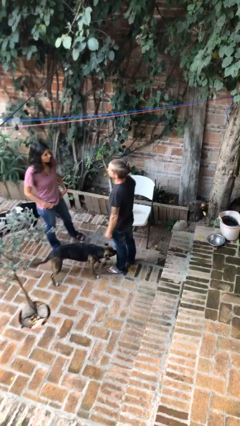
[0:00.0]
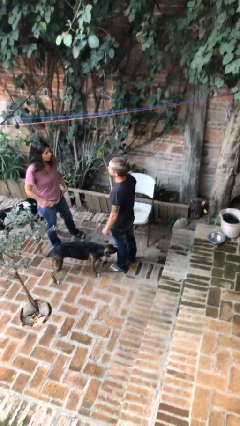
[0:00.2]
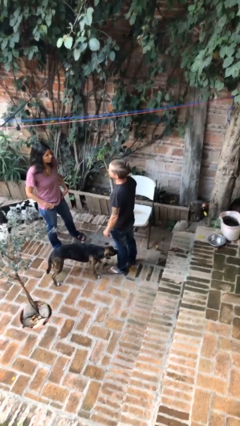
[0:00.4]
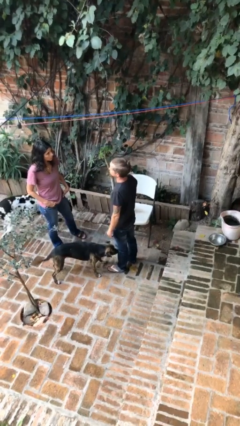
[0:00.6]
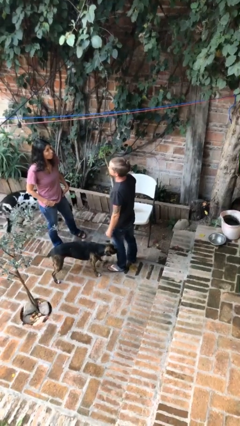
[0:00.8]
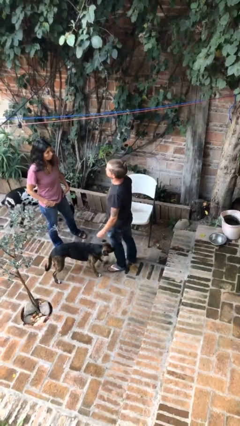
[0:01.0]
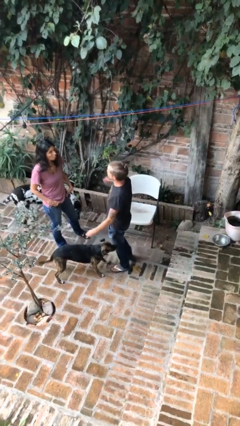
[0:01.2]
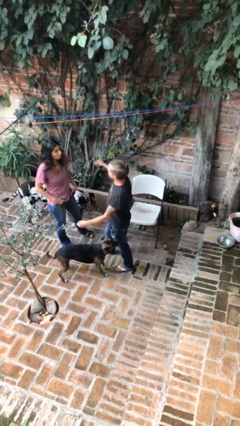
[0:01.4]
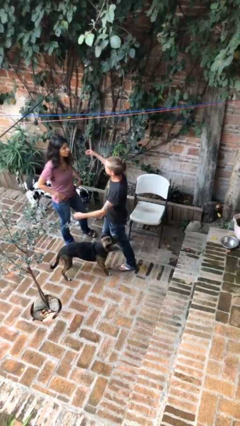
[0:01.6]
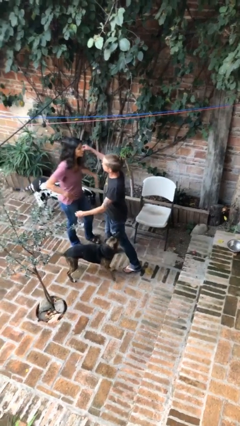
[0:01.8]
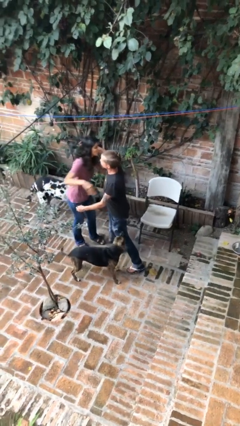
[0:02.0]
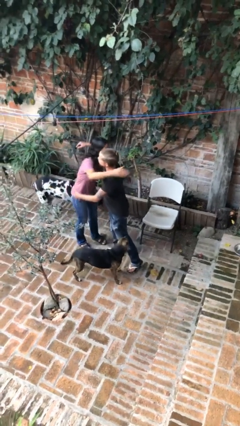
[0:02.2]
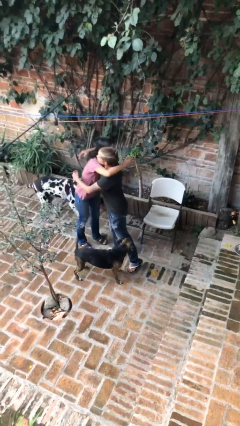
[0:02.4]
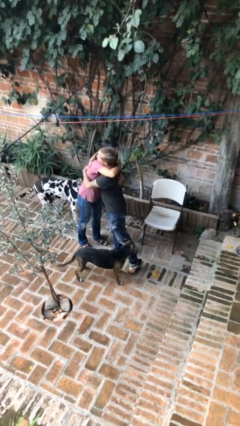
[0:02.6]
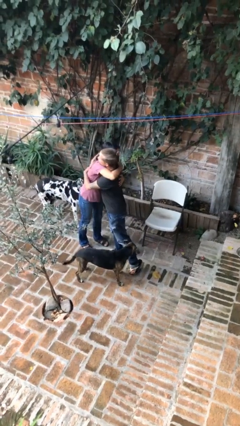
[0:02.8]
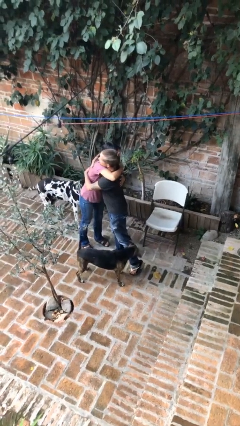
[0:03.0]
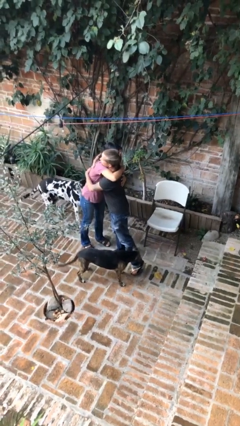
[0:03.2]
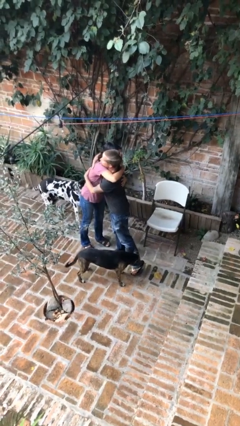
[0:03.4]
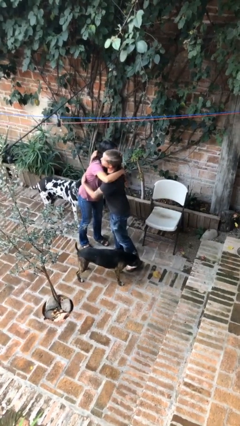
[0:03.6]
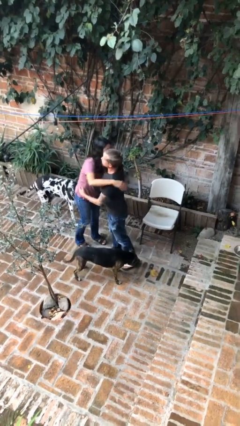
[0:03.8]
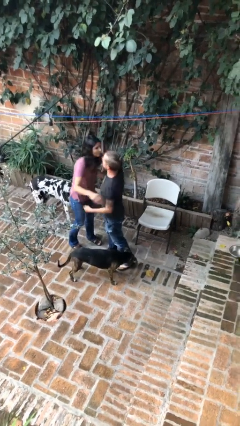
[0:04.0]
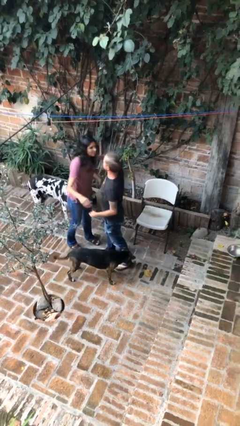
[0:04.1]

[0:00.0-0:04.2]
person embraces person

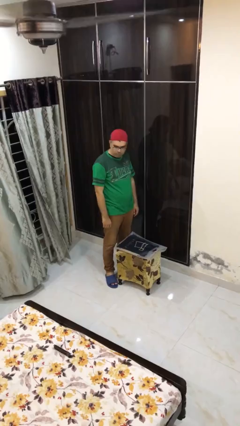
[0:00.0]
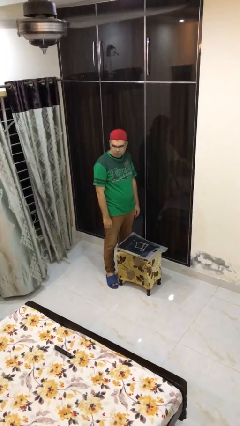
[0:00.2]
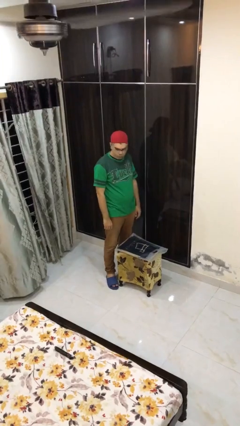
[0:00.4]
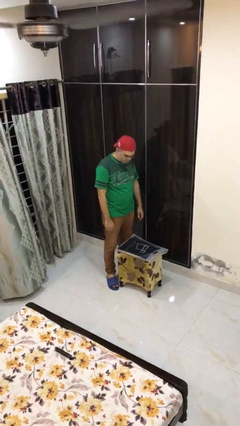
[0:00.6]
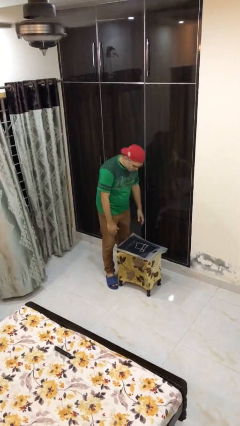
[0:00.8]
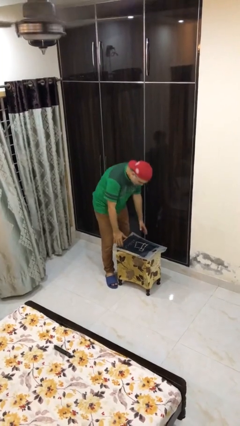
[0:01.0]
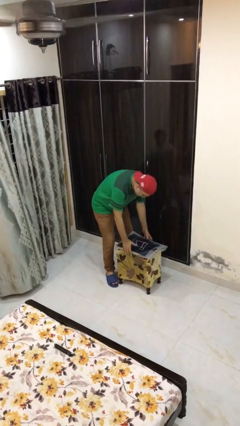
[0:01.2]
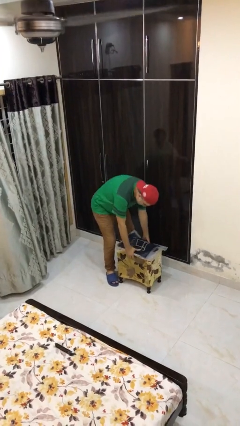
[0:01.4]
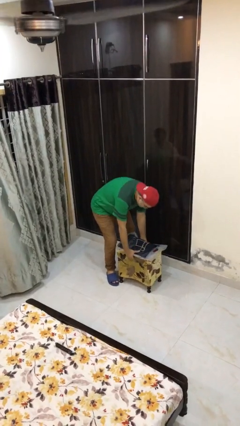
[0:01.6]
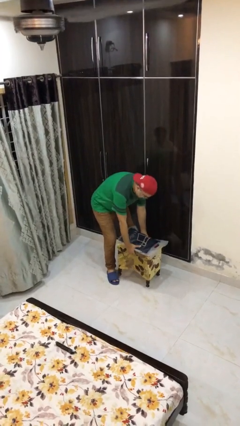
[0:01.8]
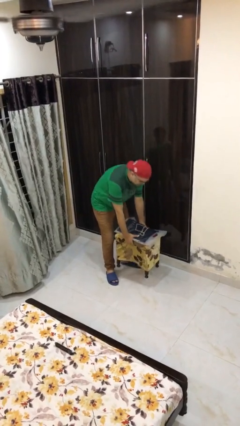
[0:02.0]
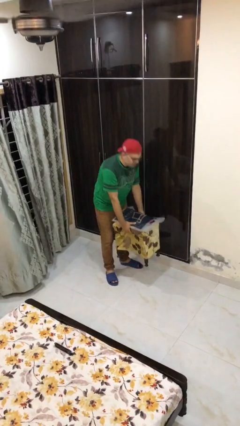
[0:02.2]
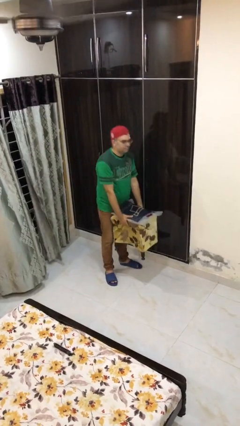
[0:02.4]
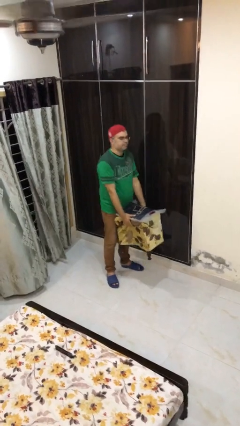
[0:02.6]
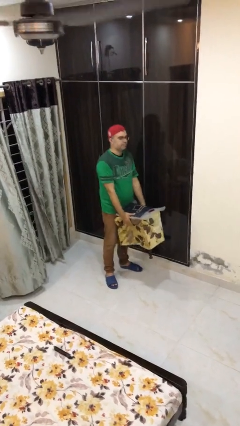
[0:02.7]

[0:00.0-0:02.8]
person picks up object from floor

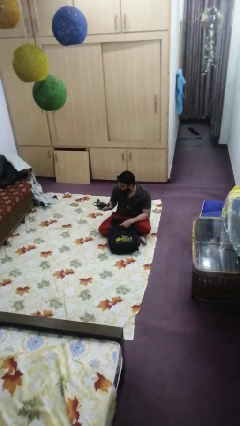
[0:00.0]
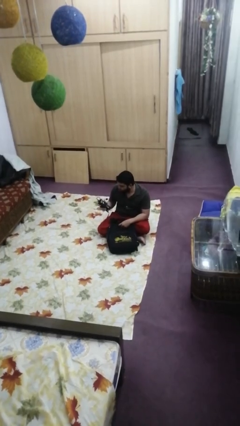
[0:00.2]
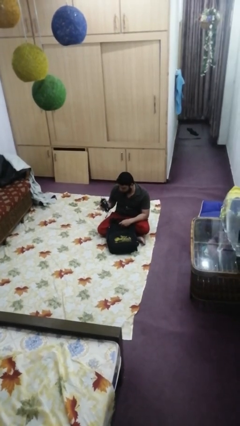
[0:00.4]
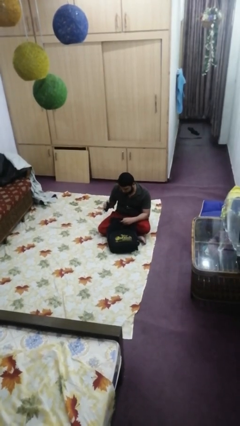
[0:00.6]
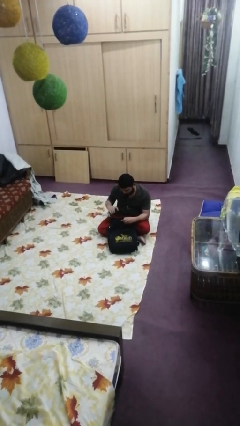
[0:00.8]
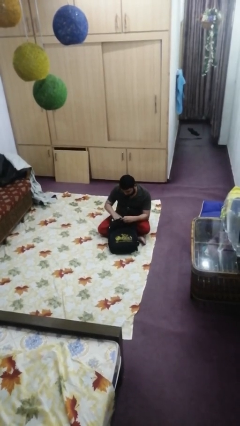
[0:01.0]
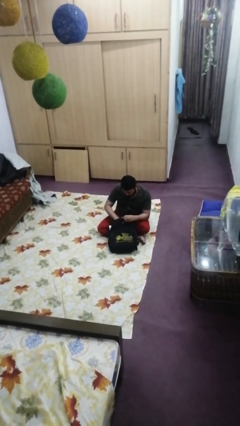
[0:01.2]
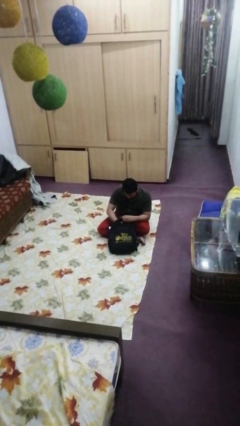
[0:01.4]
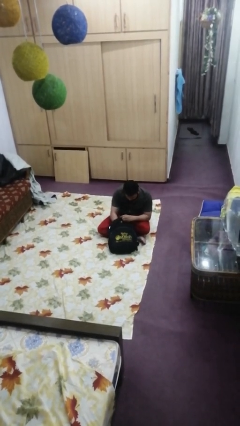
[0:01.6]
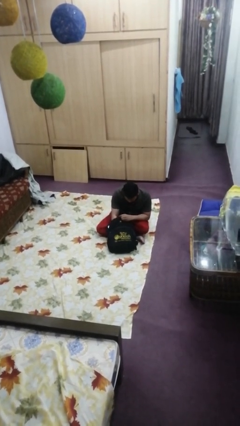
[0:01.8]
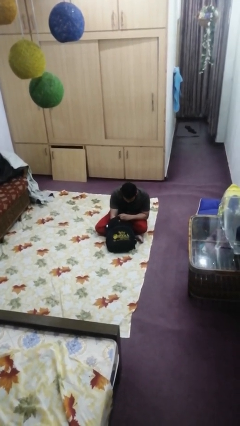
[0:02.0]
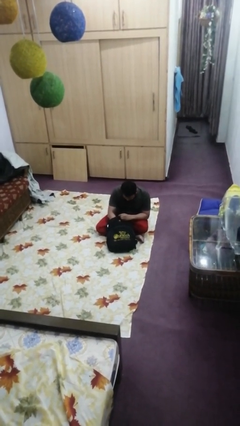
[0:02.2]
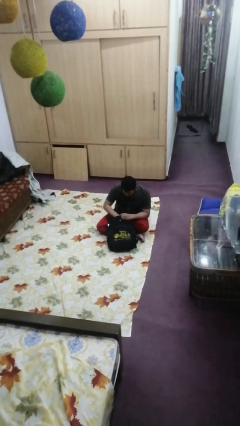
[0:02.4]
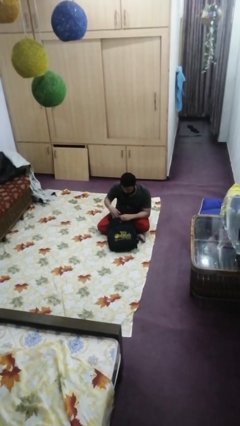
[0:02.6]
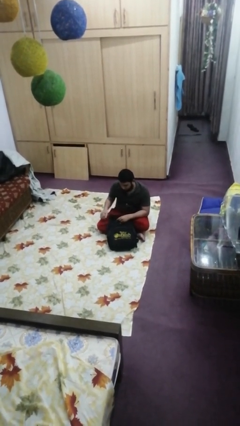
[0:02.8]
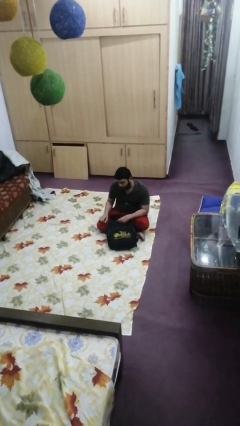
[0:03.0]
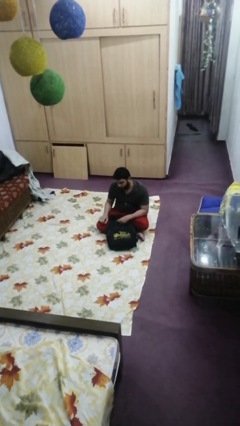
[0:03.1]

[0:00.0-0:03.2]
person puts object into backpack

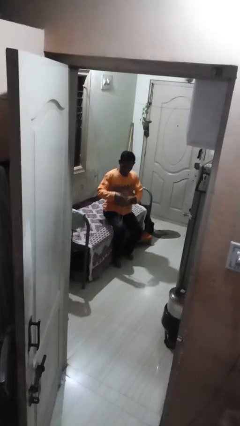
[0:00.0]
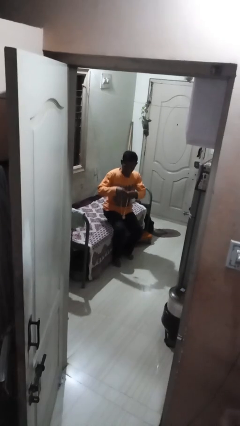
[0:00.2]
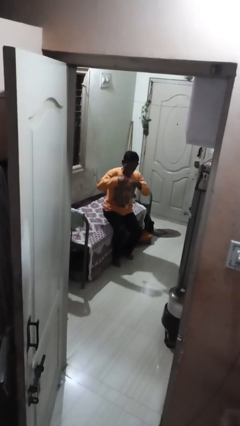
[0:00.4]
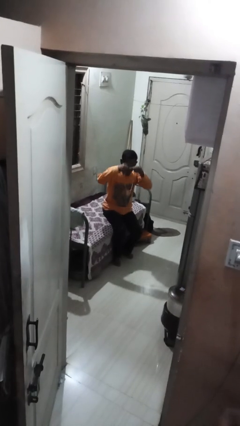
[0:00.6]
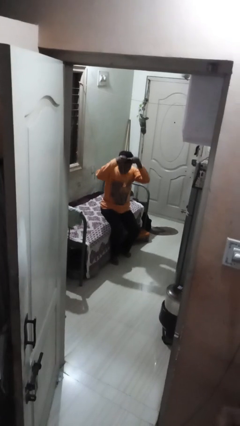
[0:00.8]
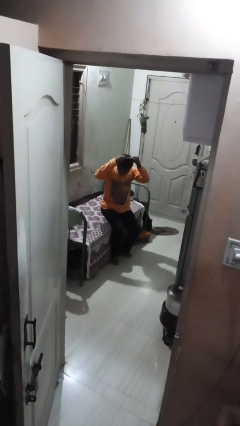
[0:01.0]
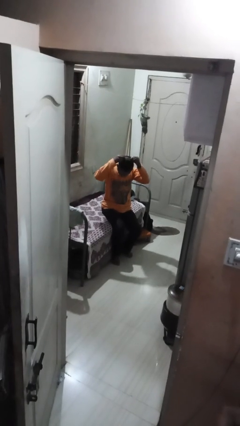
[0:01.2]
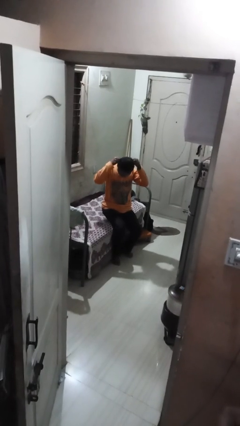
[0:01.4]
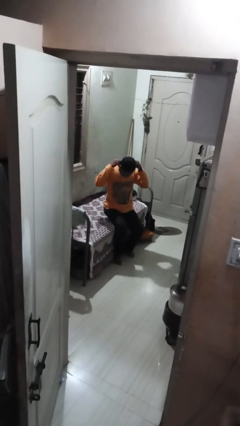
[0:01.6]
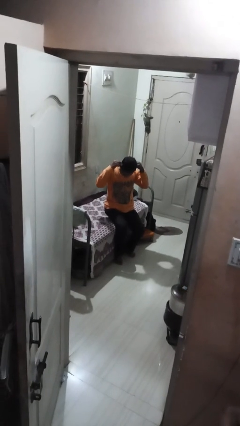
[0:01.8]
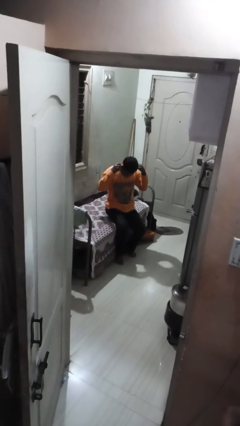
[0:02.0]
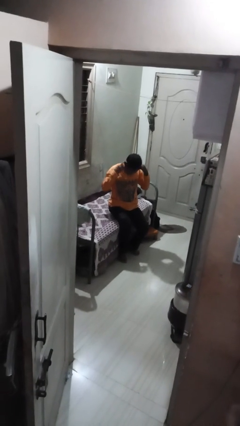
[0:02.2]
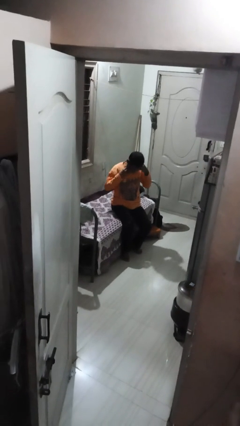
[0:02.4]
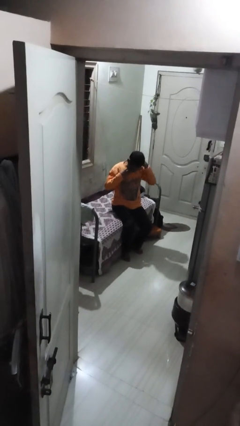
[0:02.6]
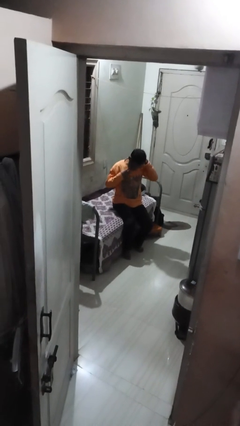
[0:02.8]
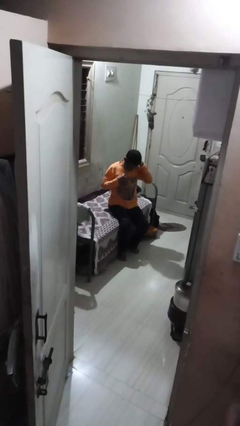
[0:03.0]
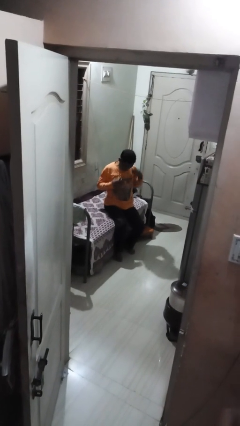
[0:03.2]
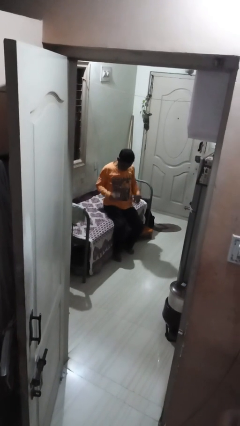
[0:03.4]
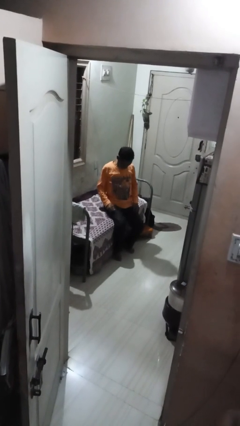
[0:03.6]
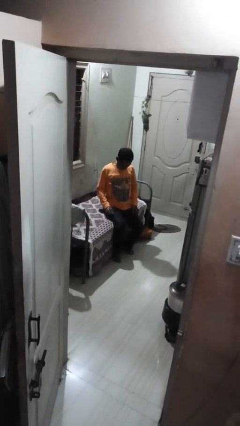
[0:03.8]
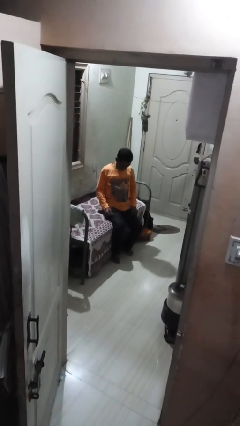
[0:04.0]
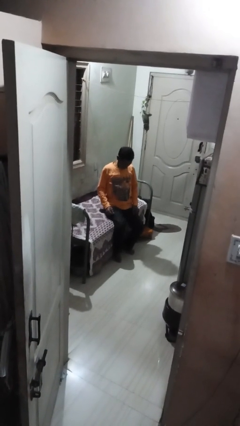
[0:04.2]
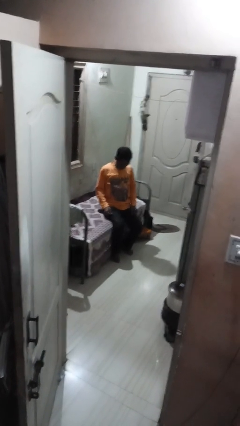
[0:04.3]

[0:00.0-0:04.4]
person puts on necklace

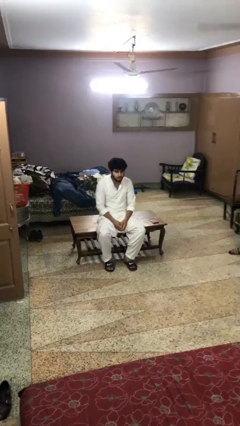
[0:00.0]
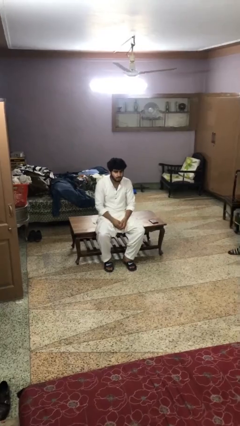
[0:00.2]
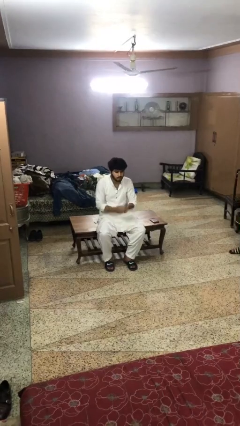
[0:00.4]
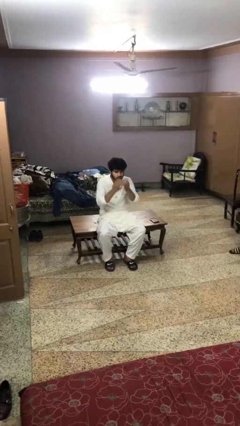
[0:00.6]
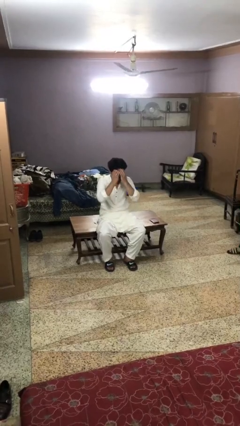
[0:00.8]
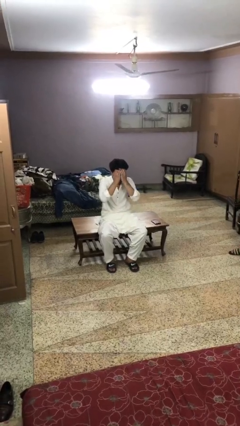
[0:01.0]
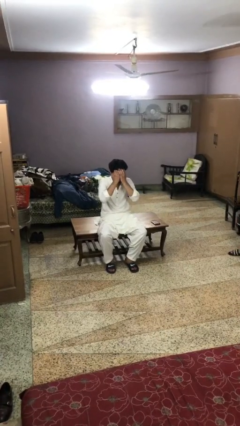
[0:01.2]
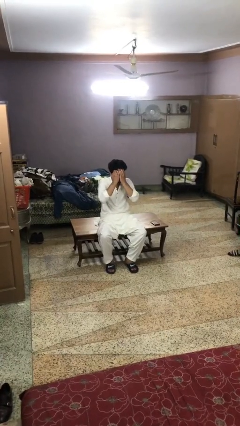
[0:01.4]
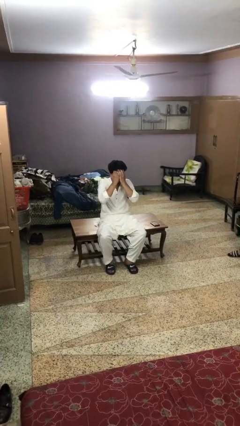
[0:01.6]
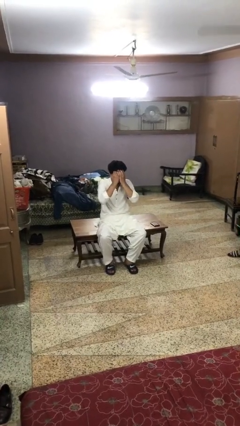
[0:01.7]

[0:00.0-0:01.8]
person covers face with hands

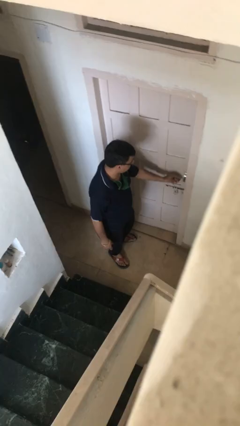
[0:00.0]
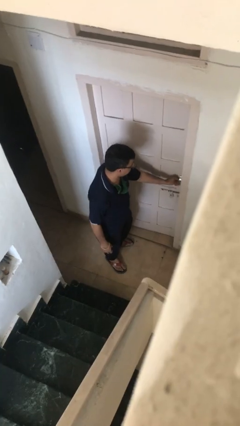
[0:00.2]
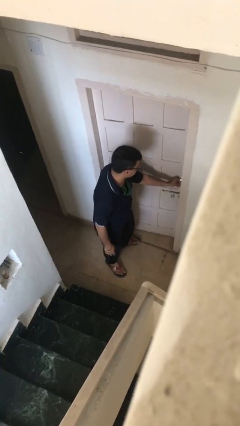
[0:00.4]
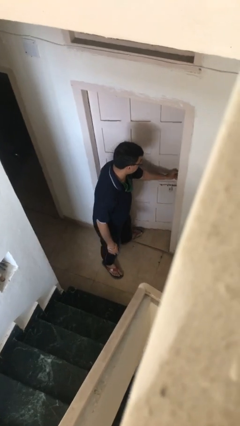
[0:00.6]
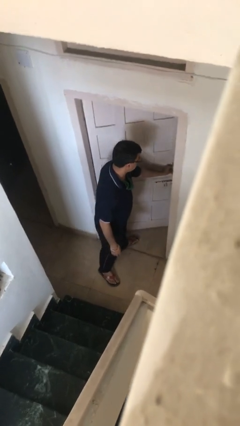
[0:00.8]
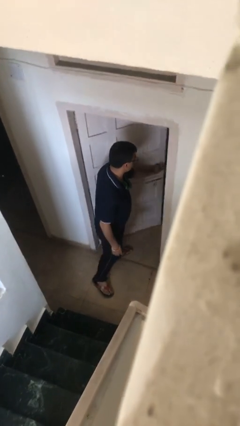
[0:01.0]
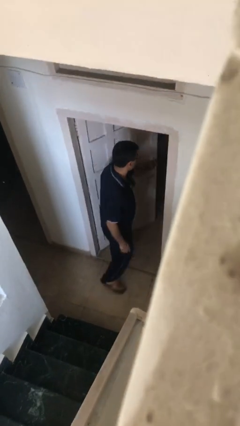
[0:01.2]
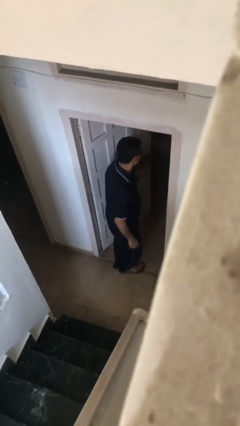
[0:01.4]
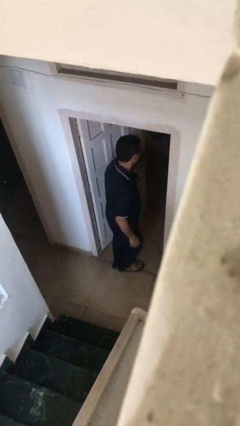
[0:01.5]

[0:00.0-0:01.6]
person opens facility door
